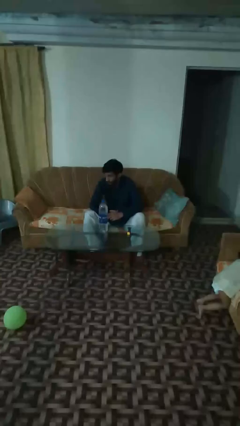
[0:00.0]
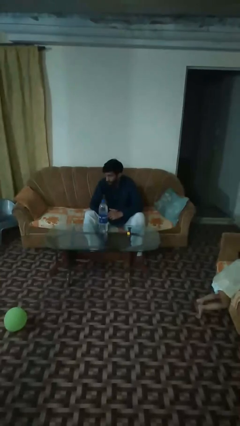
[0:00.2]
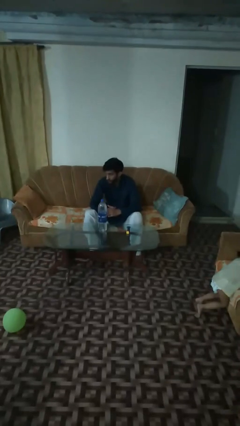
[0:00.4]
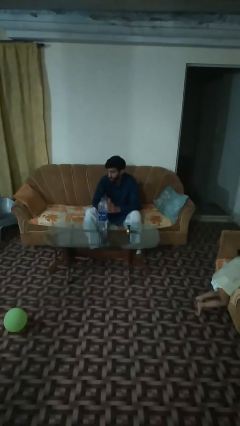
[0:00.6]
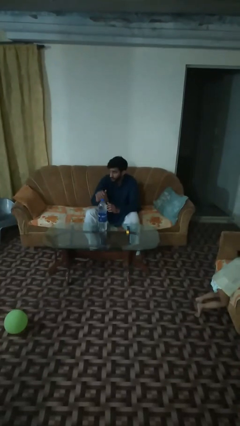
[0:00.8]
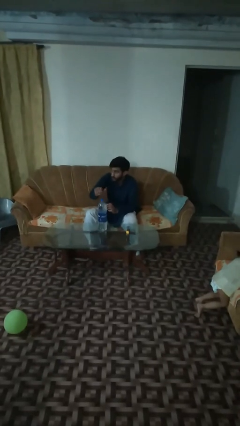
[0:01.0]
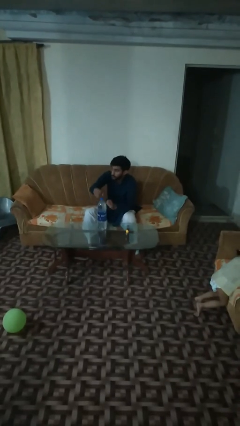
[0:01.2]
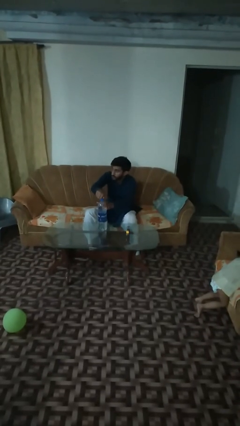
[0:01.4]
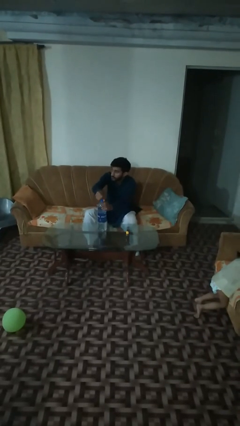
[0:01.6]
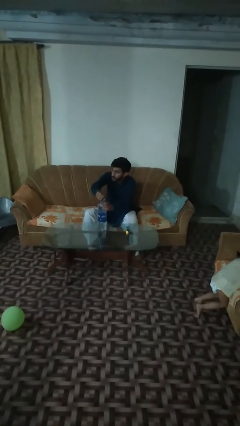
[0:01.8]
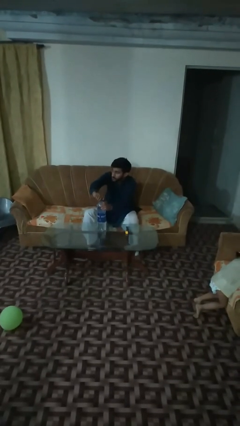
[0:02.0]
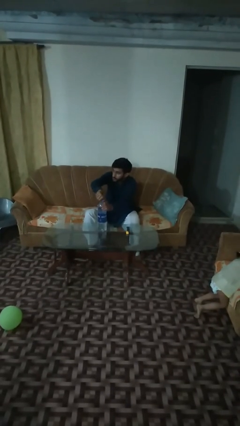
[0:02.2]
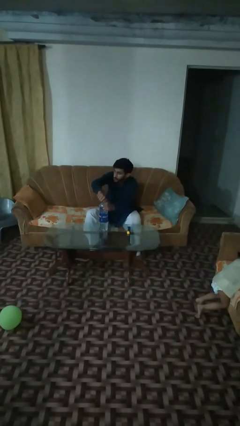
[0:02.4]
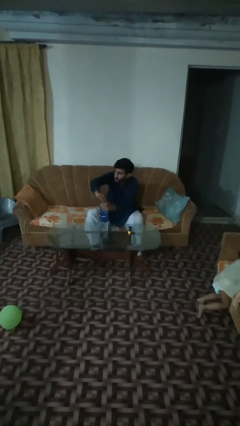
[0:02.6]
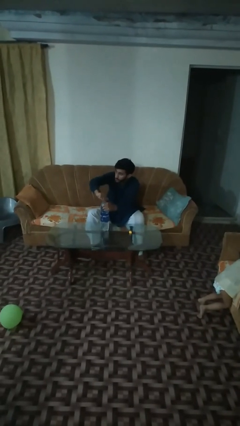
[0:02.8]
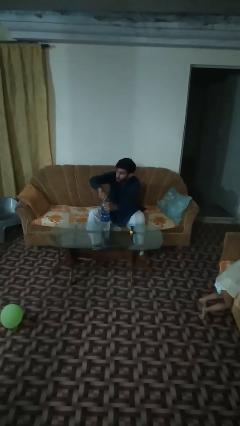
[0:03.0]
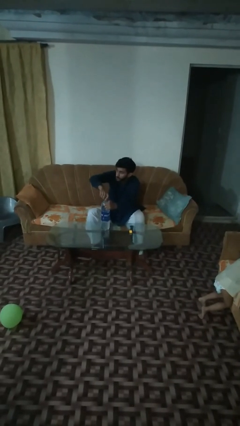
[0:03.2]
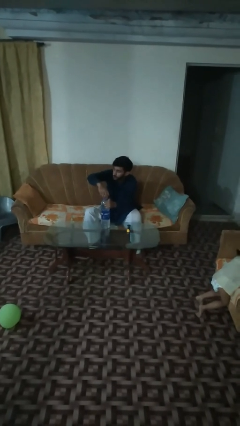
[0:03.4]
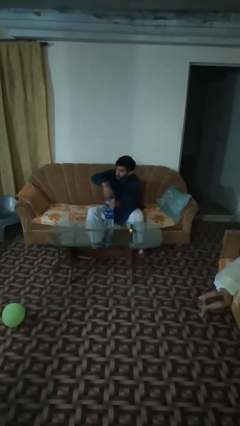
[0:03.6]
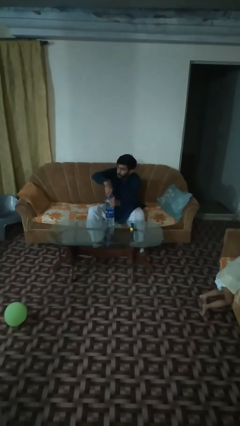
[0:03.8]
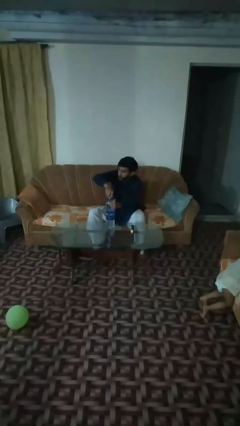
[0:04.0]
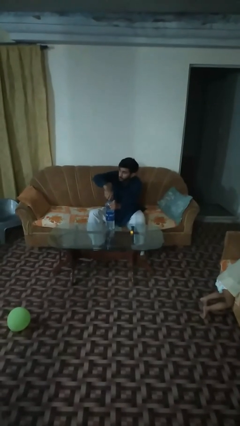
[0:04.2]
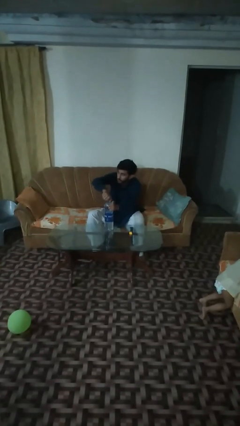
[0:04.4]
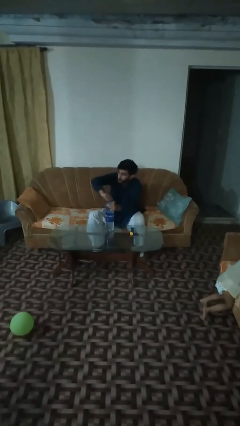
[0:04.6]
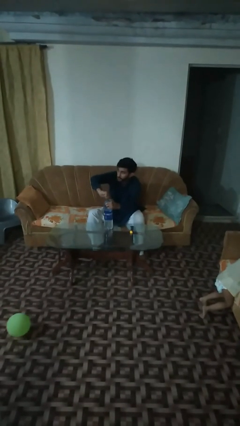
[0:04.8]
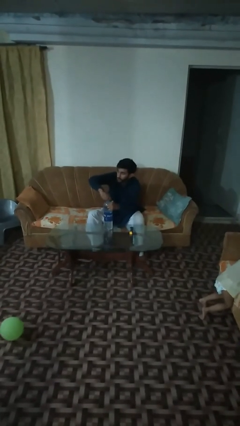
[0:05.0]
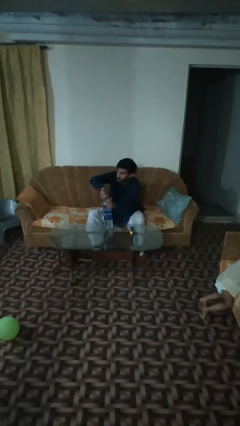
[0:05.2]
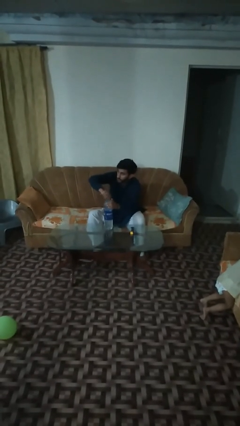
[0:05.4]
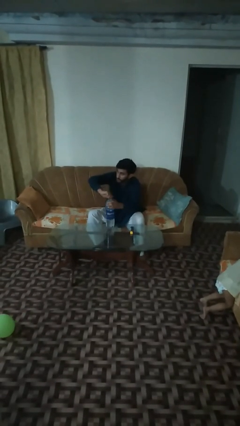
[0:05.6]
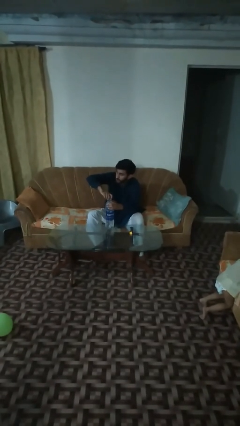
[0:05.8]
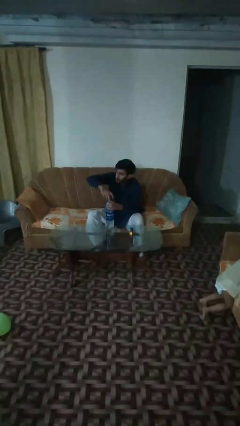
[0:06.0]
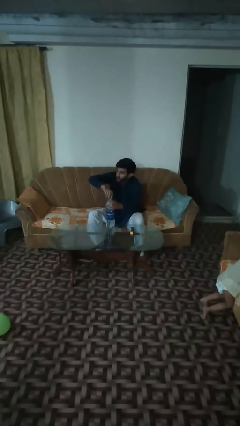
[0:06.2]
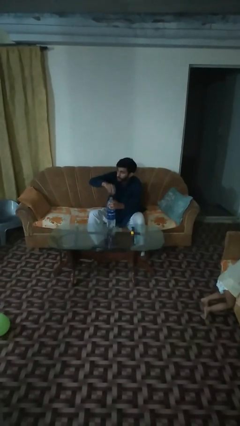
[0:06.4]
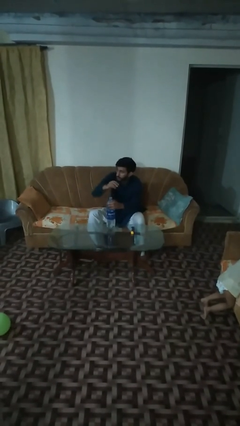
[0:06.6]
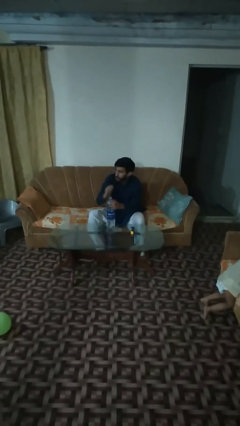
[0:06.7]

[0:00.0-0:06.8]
person unscrews lid from bottle

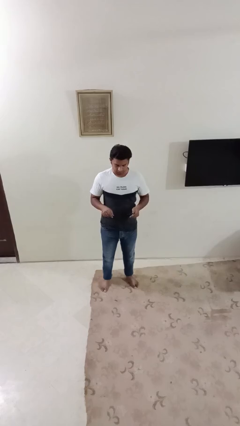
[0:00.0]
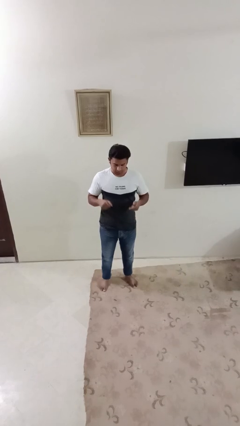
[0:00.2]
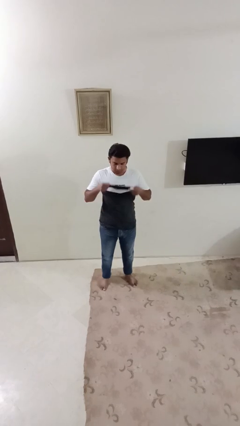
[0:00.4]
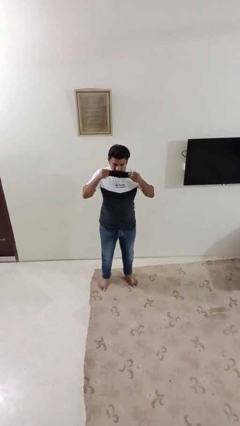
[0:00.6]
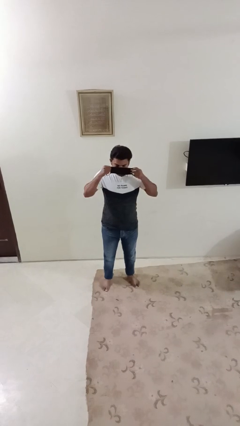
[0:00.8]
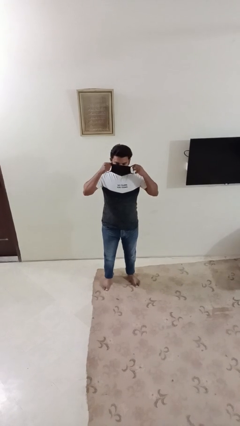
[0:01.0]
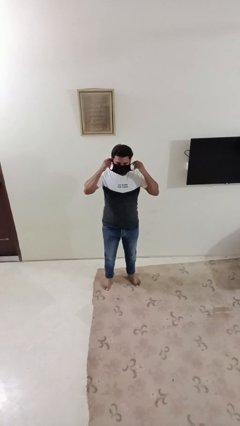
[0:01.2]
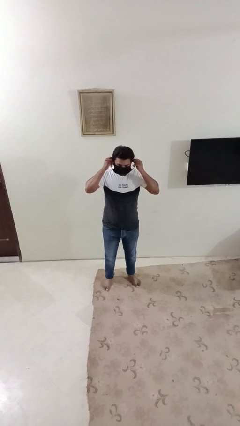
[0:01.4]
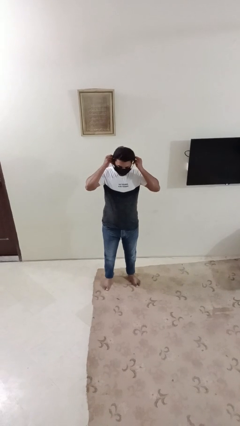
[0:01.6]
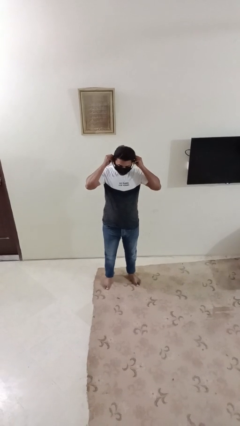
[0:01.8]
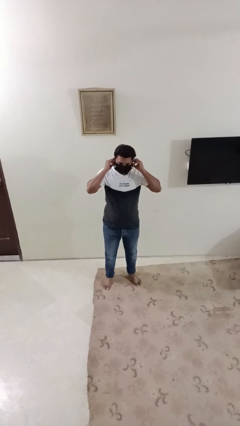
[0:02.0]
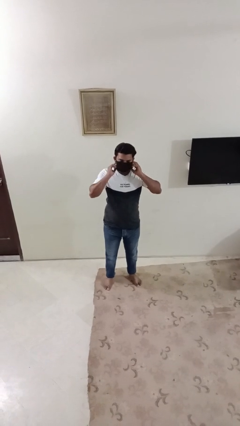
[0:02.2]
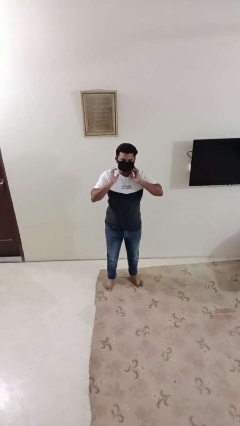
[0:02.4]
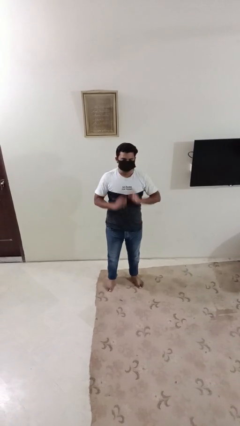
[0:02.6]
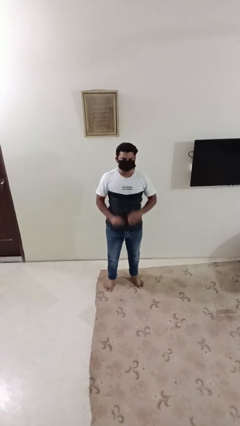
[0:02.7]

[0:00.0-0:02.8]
person puts on facemask

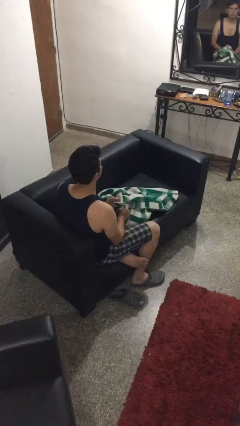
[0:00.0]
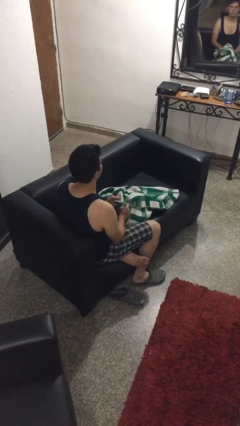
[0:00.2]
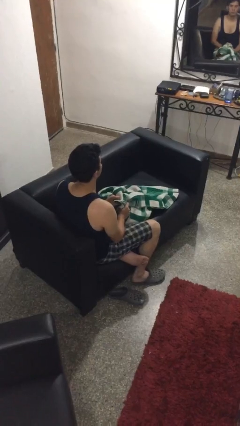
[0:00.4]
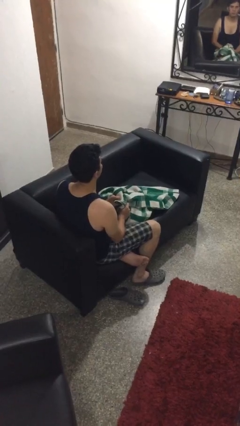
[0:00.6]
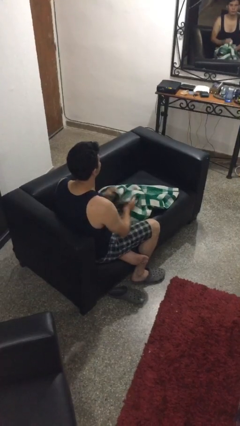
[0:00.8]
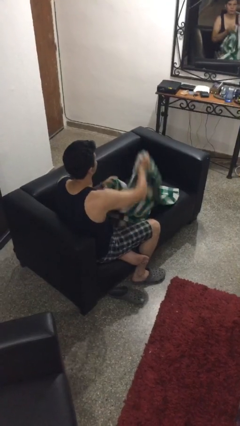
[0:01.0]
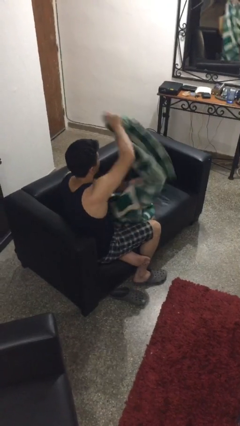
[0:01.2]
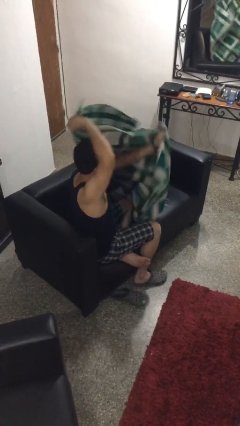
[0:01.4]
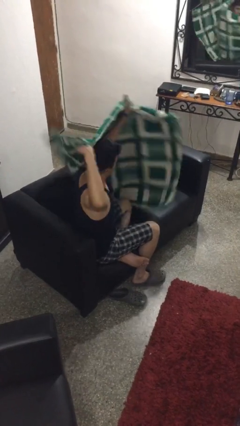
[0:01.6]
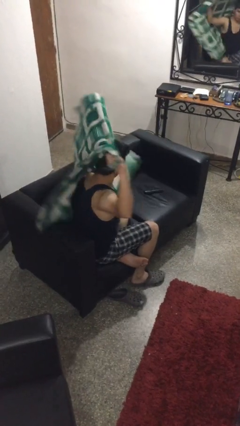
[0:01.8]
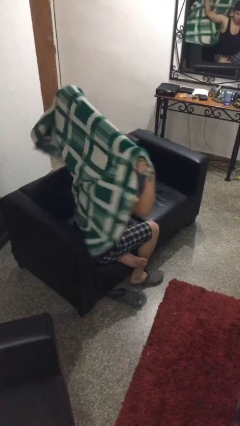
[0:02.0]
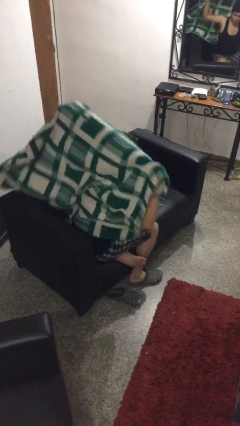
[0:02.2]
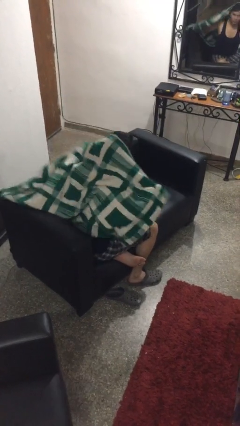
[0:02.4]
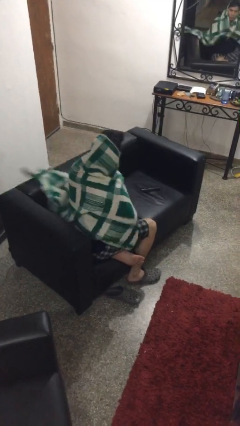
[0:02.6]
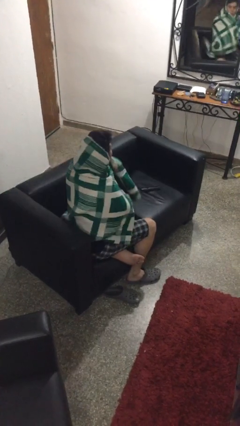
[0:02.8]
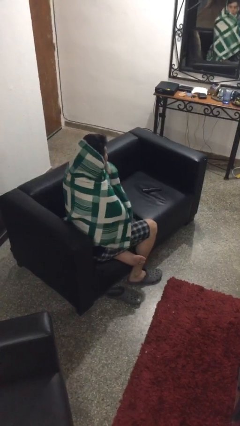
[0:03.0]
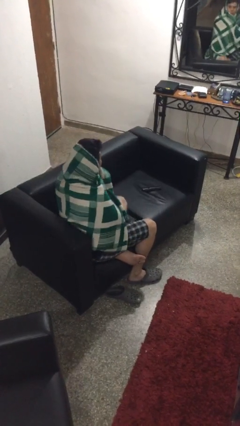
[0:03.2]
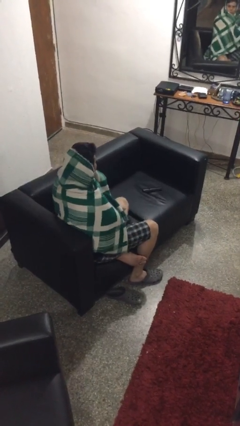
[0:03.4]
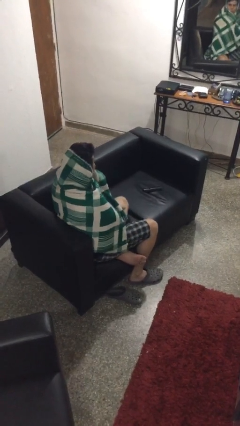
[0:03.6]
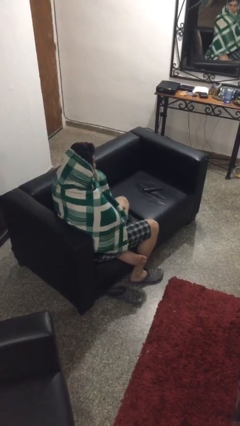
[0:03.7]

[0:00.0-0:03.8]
person covers with blanket

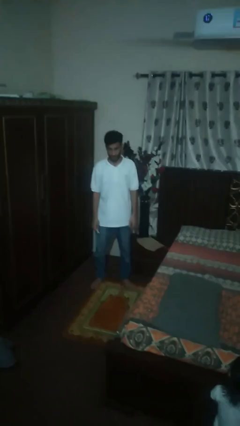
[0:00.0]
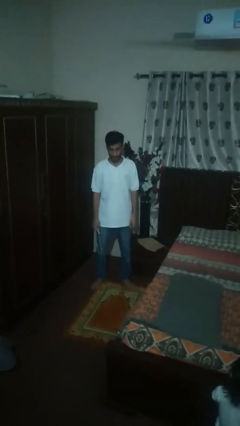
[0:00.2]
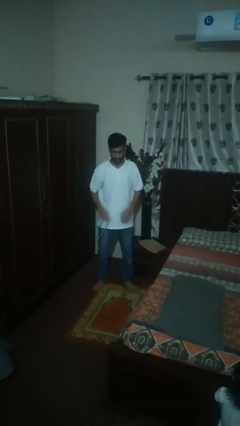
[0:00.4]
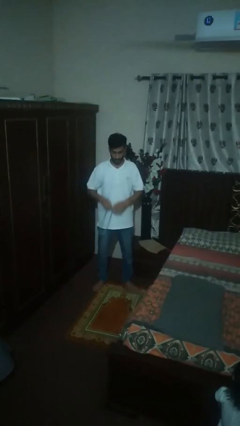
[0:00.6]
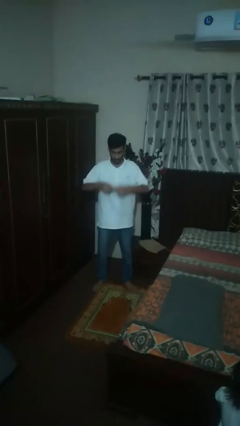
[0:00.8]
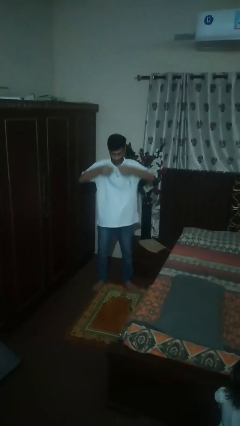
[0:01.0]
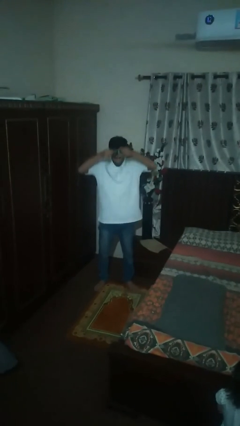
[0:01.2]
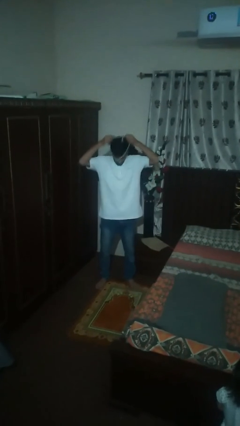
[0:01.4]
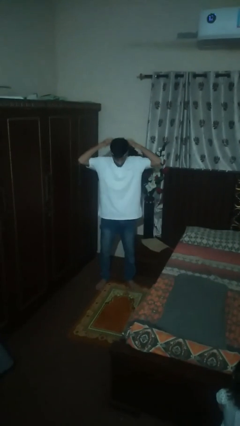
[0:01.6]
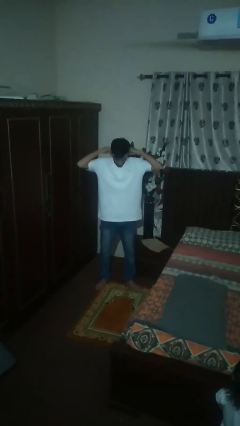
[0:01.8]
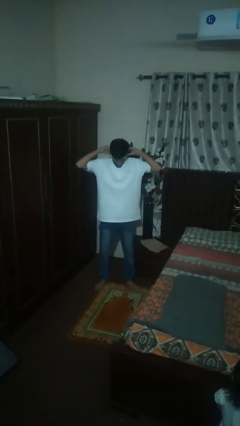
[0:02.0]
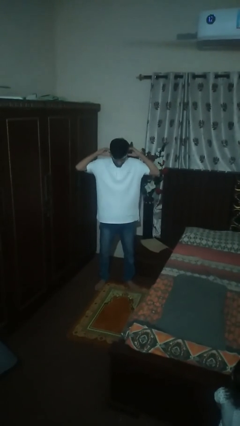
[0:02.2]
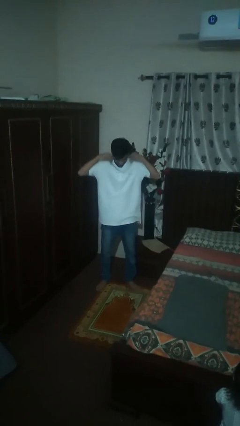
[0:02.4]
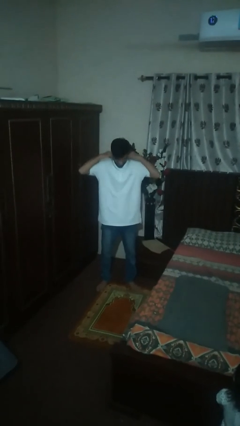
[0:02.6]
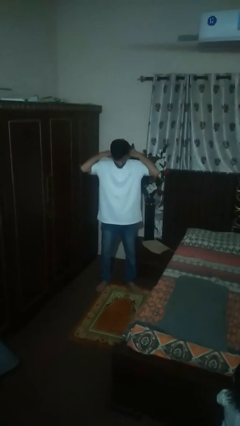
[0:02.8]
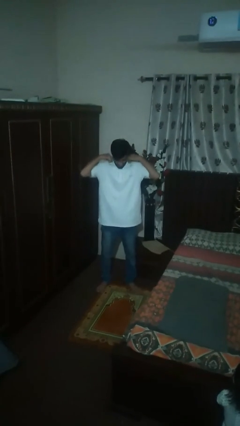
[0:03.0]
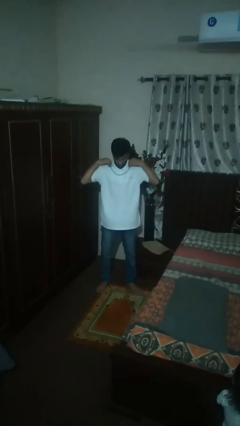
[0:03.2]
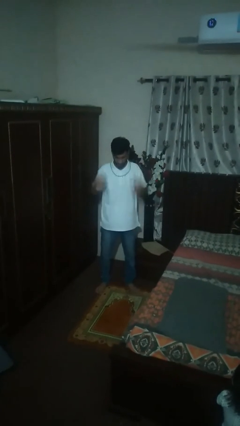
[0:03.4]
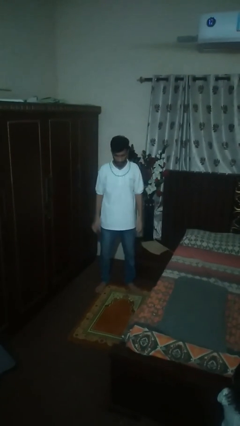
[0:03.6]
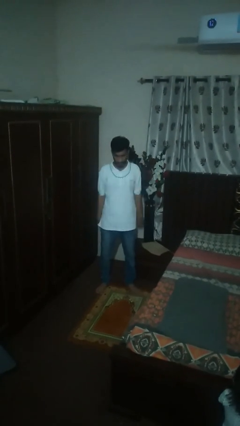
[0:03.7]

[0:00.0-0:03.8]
person puts on necklace

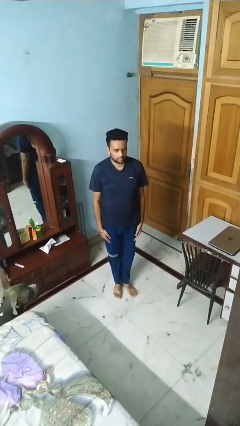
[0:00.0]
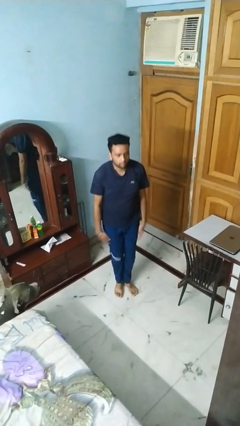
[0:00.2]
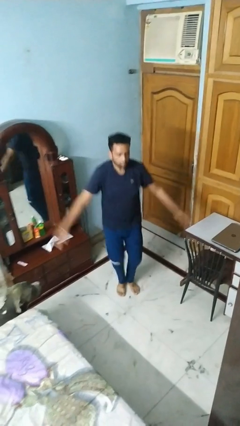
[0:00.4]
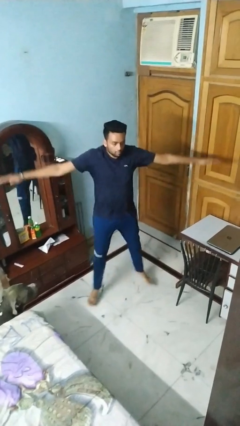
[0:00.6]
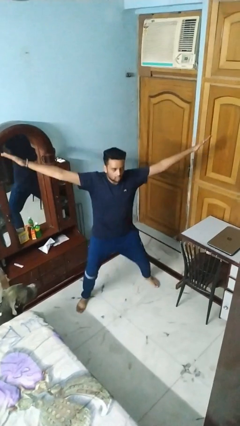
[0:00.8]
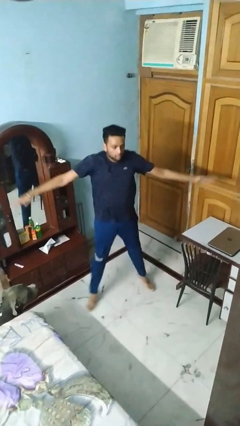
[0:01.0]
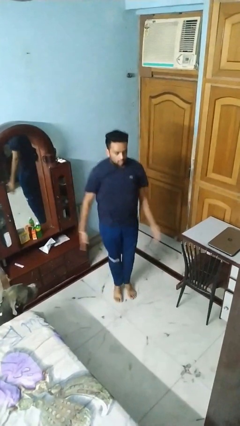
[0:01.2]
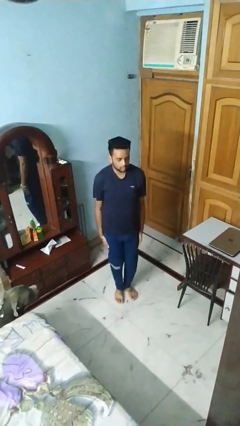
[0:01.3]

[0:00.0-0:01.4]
person exercises with jumping jacks
